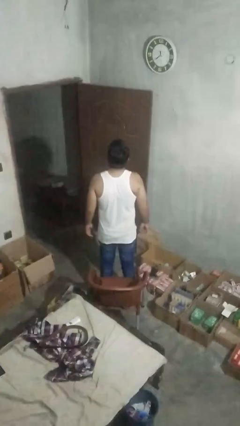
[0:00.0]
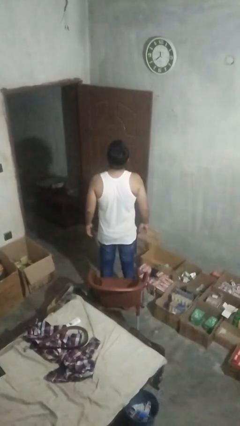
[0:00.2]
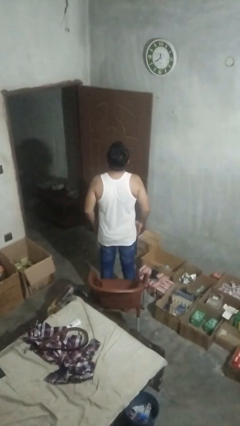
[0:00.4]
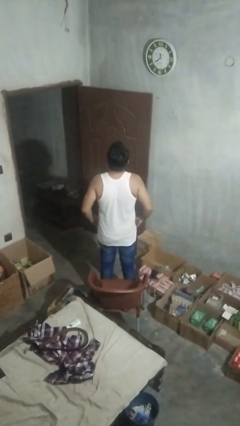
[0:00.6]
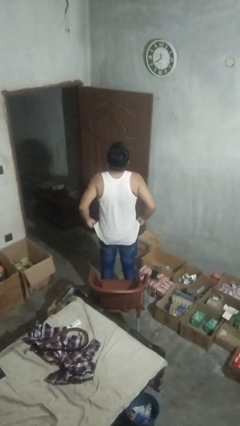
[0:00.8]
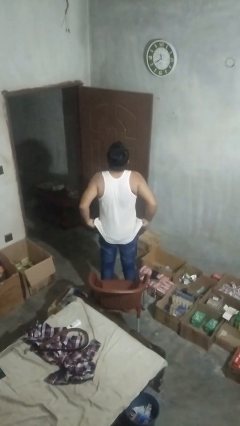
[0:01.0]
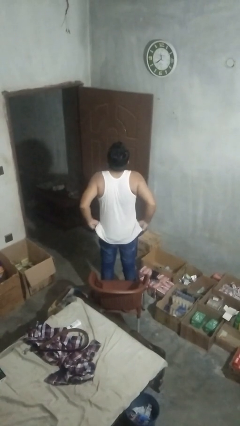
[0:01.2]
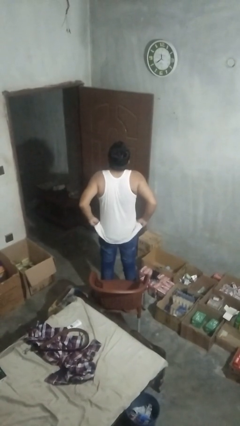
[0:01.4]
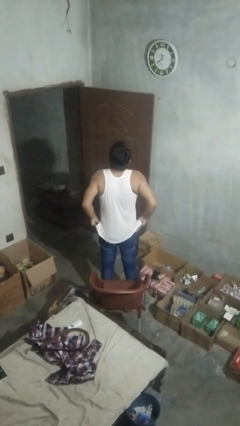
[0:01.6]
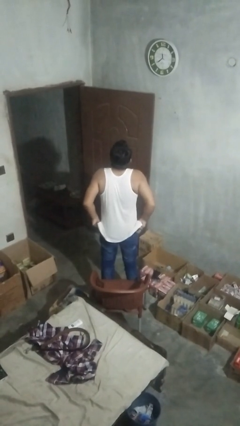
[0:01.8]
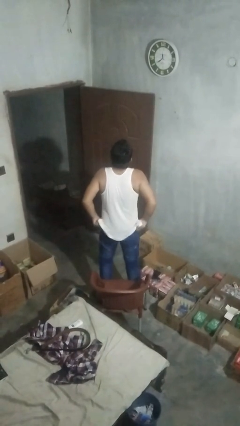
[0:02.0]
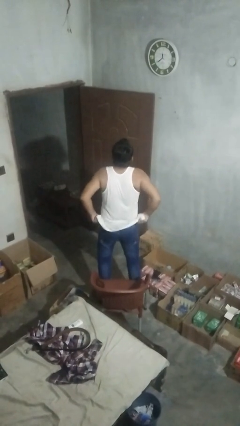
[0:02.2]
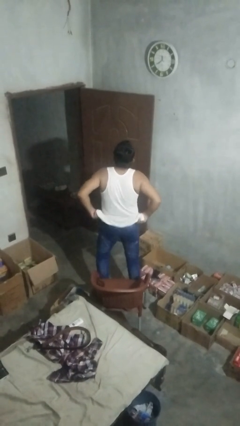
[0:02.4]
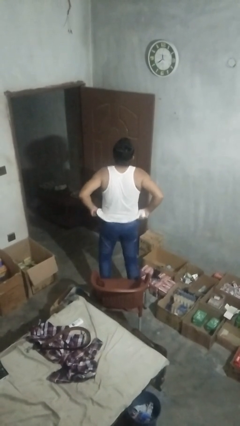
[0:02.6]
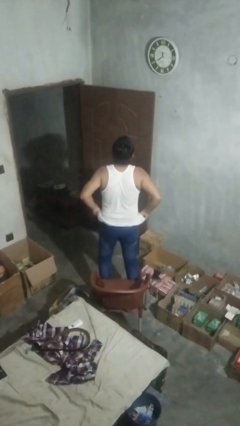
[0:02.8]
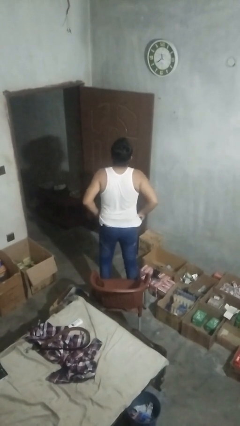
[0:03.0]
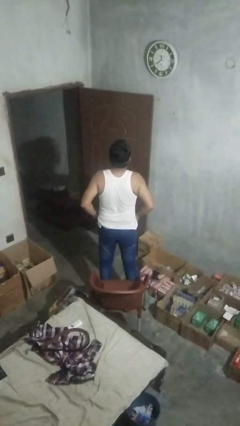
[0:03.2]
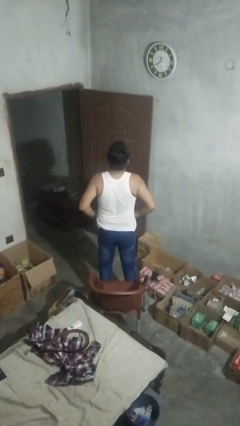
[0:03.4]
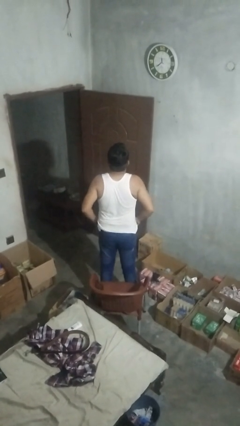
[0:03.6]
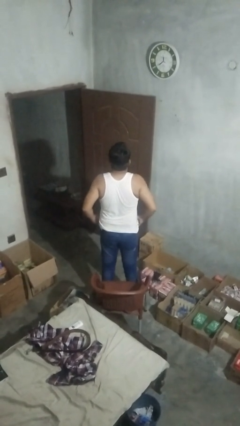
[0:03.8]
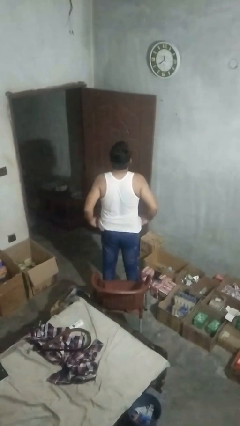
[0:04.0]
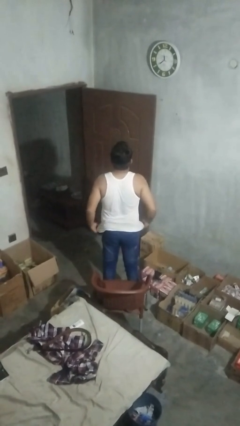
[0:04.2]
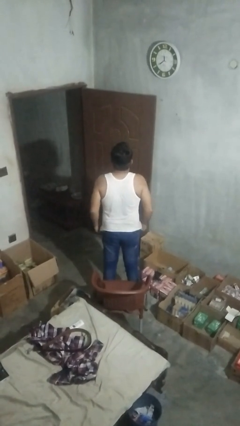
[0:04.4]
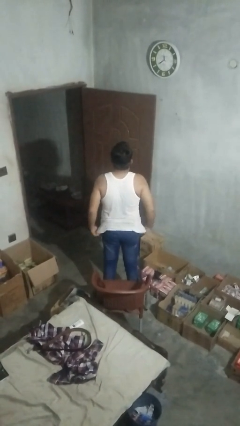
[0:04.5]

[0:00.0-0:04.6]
person hikes up pants

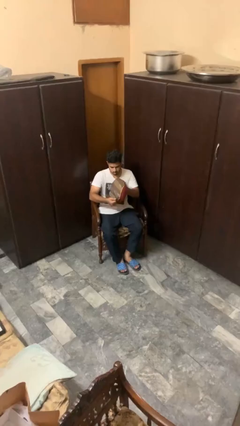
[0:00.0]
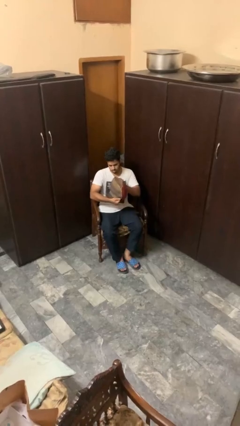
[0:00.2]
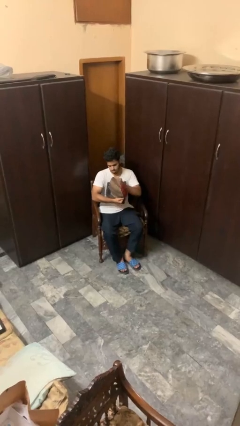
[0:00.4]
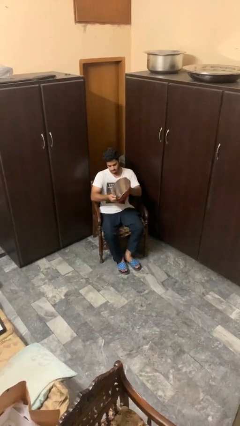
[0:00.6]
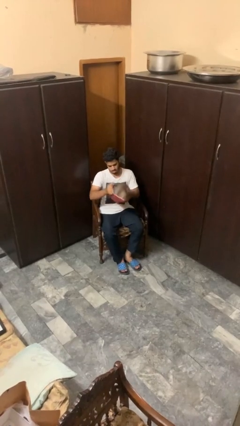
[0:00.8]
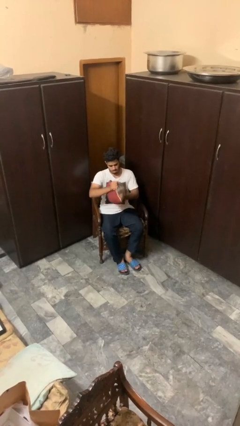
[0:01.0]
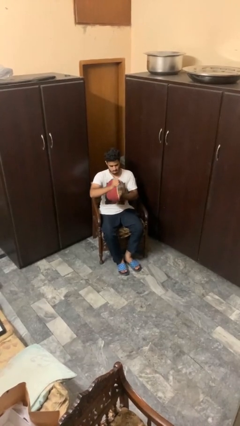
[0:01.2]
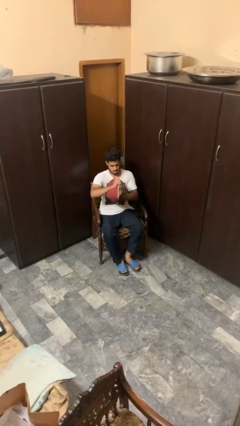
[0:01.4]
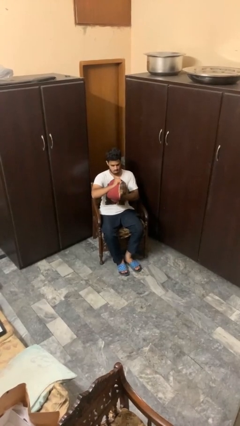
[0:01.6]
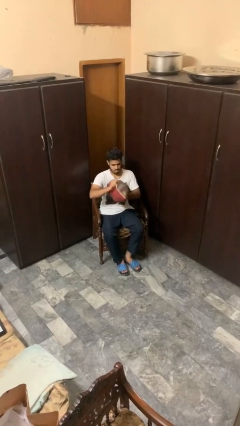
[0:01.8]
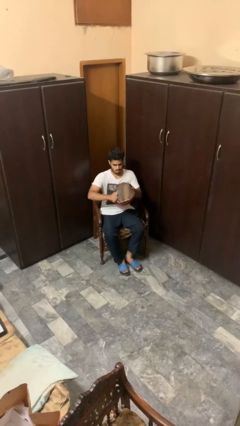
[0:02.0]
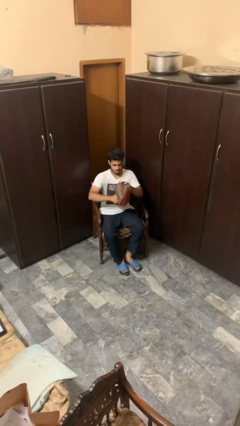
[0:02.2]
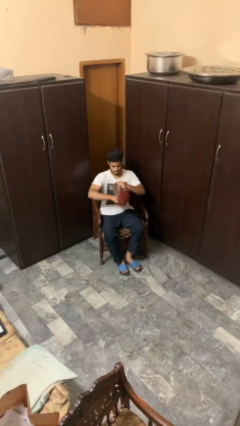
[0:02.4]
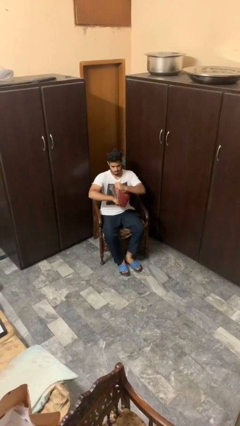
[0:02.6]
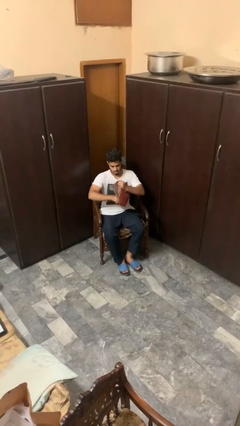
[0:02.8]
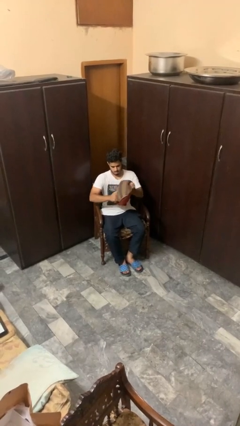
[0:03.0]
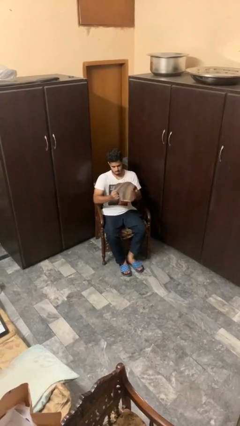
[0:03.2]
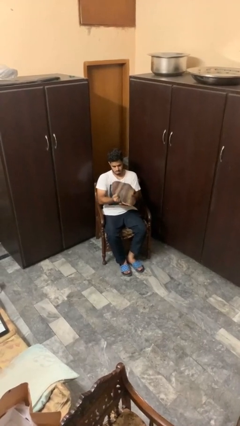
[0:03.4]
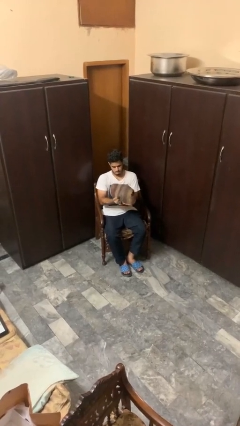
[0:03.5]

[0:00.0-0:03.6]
person squeezes object

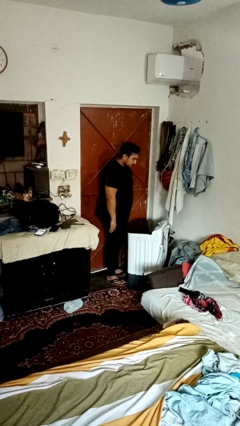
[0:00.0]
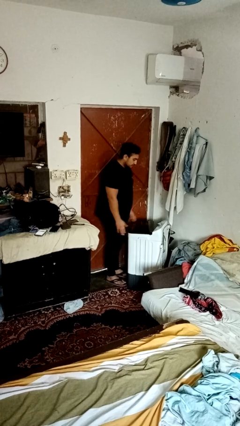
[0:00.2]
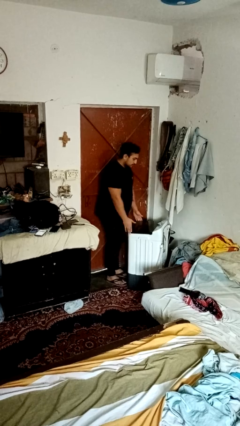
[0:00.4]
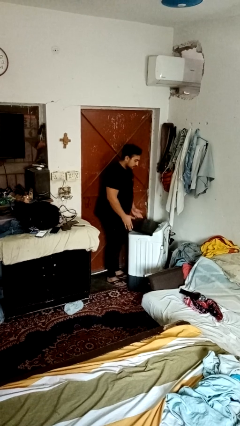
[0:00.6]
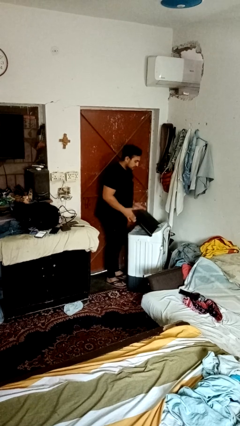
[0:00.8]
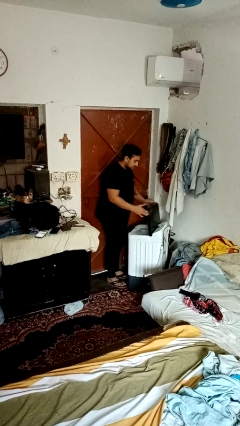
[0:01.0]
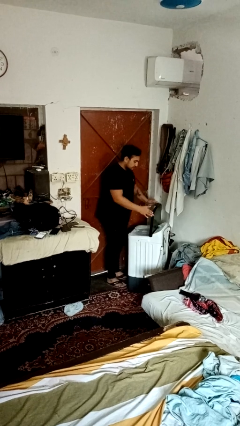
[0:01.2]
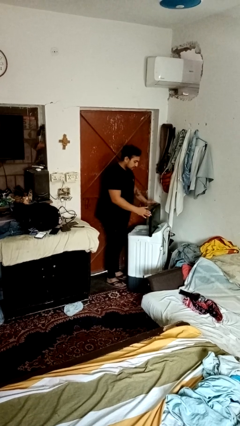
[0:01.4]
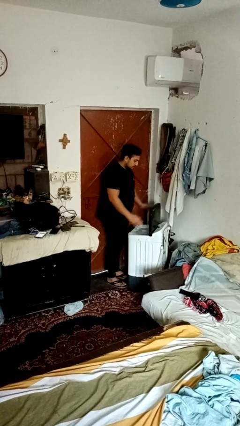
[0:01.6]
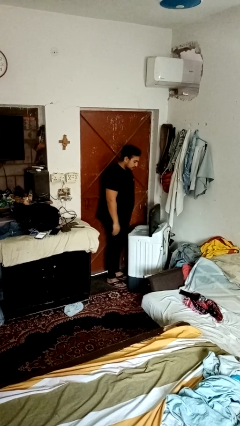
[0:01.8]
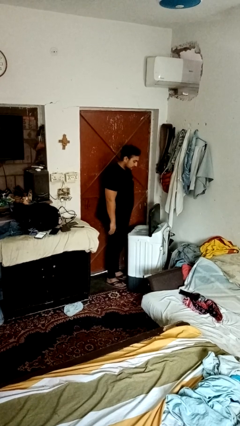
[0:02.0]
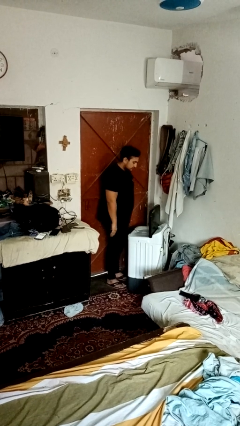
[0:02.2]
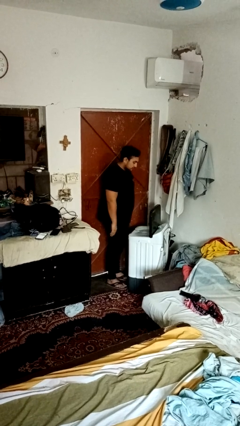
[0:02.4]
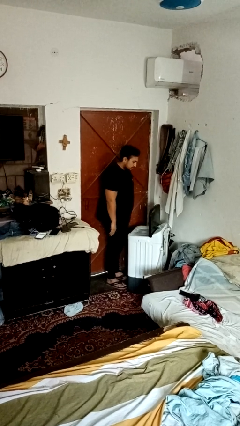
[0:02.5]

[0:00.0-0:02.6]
person opens clothes washer

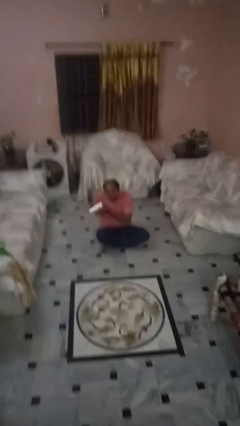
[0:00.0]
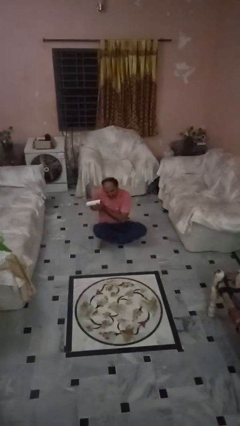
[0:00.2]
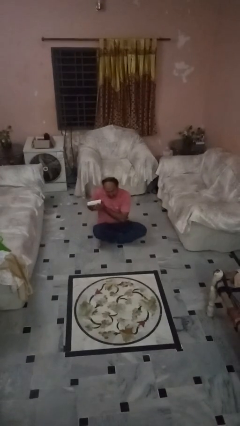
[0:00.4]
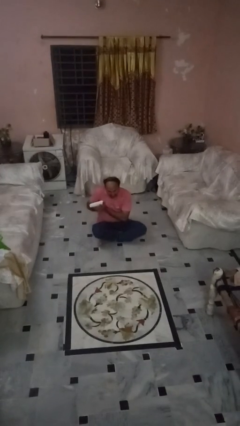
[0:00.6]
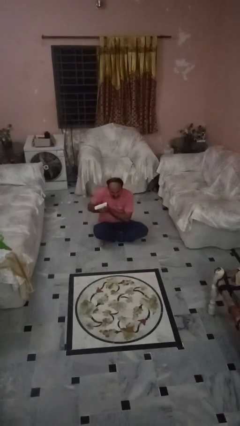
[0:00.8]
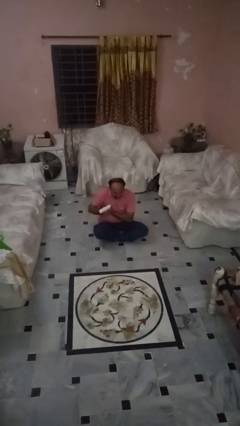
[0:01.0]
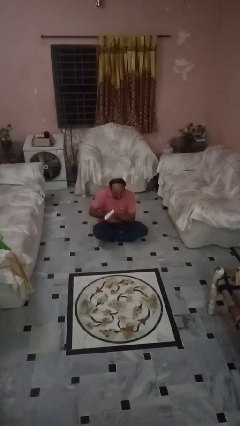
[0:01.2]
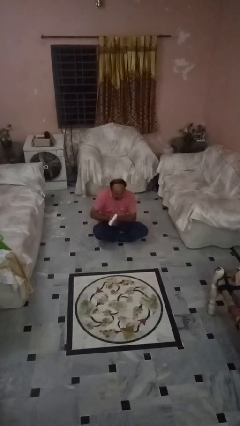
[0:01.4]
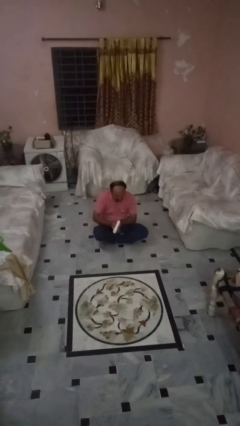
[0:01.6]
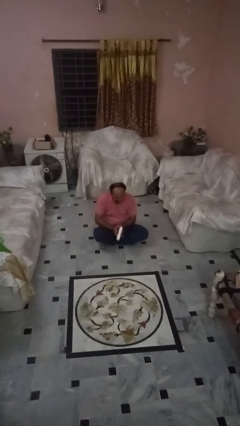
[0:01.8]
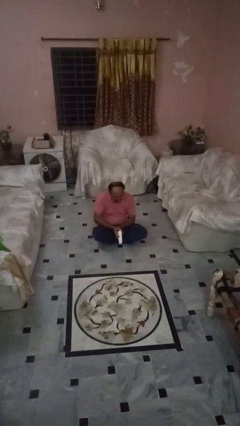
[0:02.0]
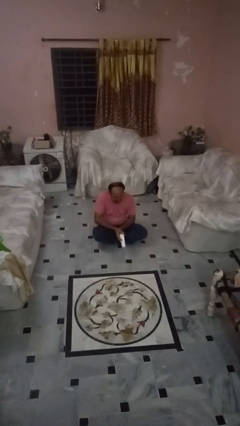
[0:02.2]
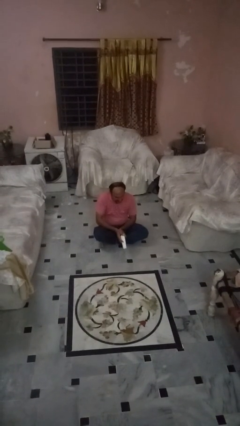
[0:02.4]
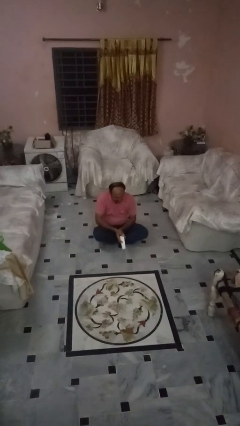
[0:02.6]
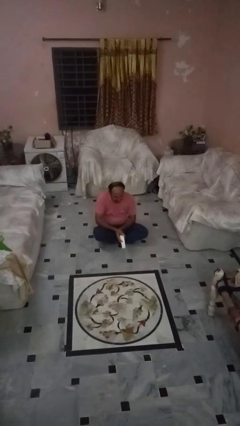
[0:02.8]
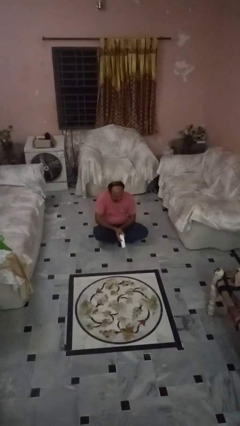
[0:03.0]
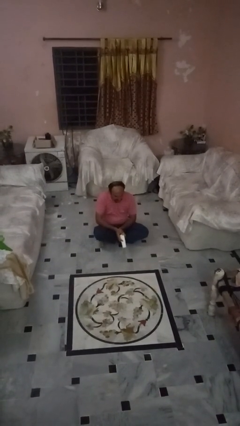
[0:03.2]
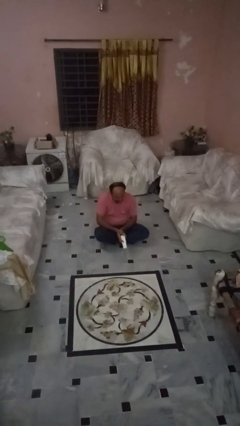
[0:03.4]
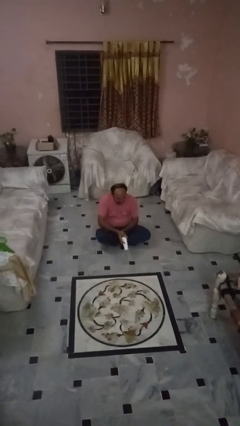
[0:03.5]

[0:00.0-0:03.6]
person catches dropped object

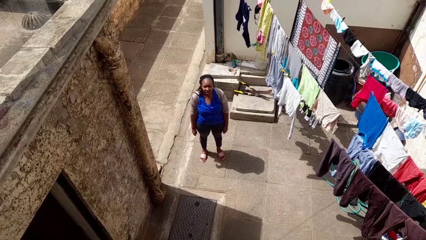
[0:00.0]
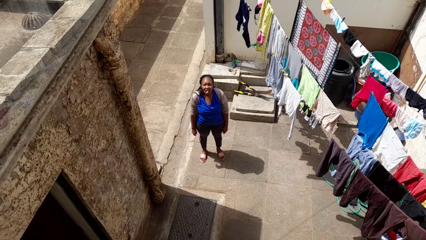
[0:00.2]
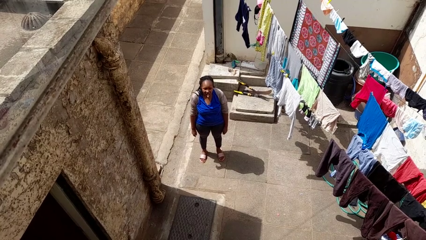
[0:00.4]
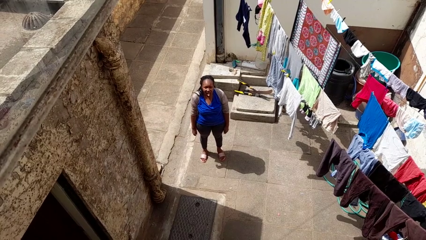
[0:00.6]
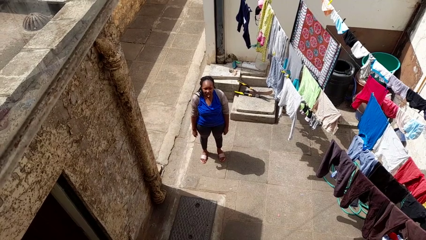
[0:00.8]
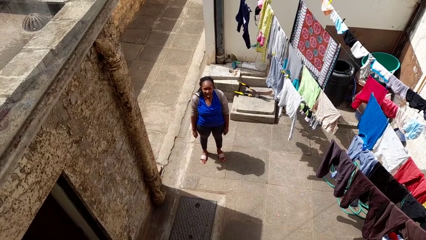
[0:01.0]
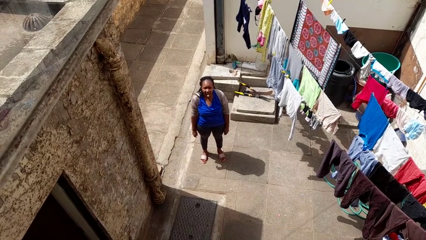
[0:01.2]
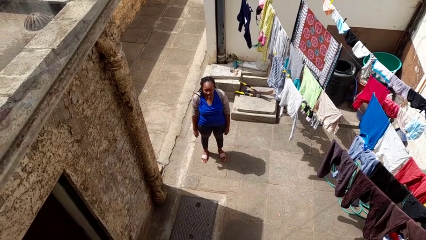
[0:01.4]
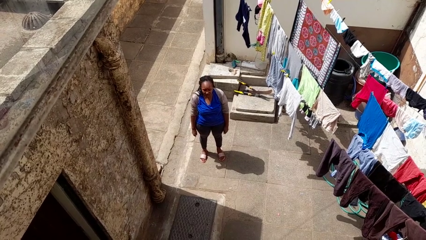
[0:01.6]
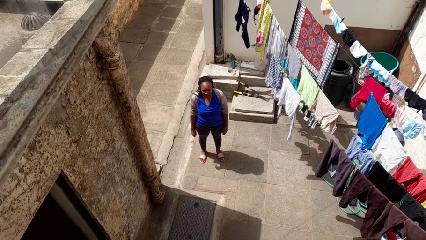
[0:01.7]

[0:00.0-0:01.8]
person sticks out tongue

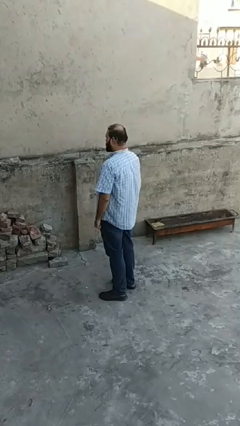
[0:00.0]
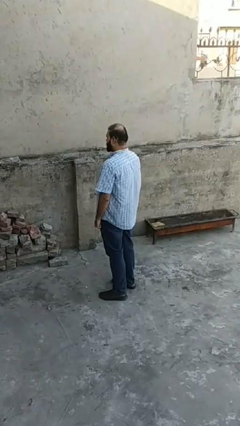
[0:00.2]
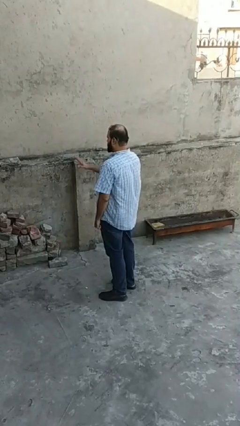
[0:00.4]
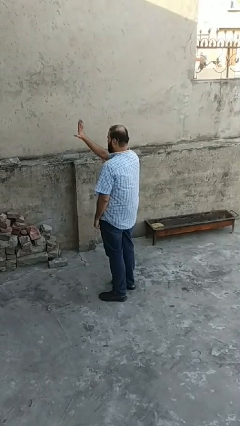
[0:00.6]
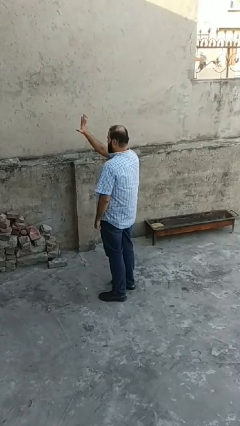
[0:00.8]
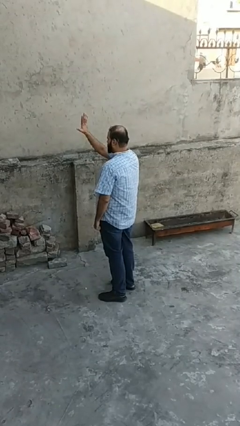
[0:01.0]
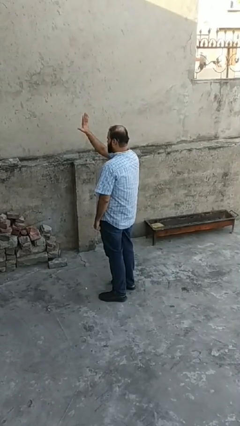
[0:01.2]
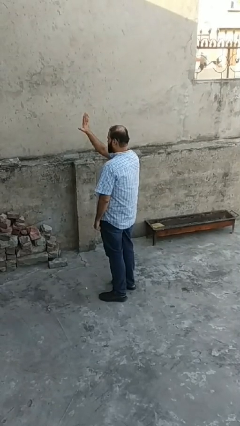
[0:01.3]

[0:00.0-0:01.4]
person gestures number five
